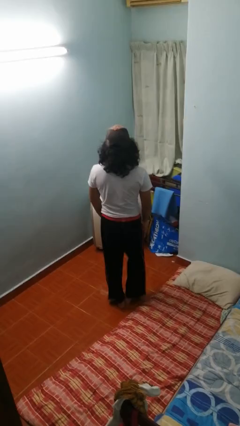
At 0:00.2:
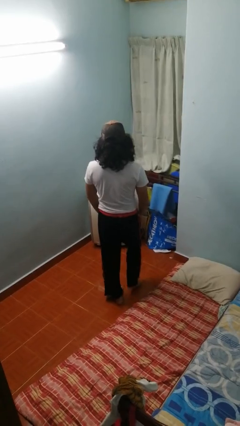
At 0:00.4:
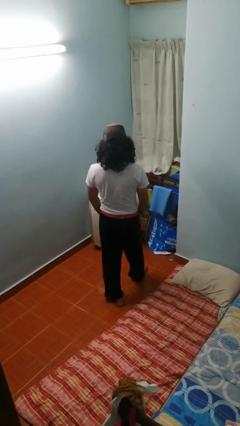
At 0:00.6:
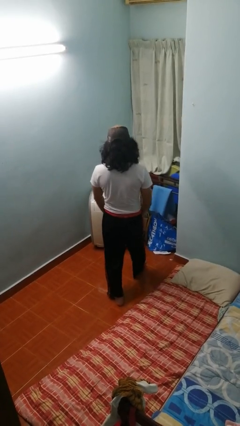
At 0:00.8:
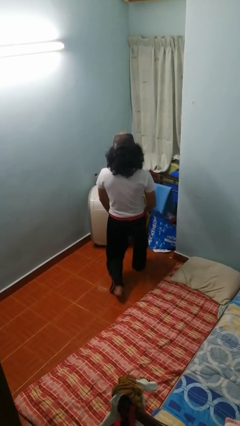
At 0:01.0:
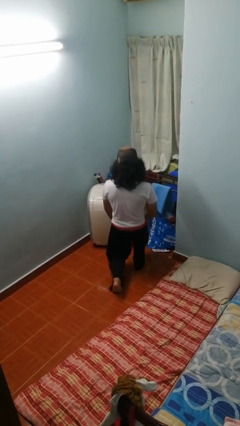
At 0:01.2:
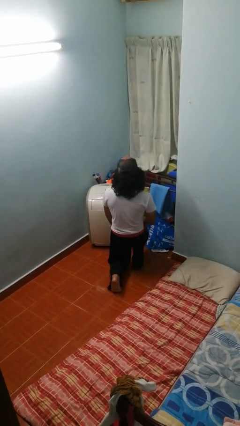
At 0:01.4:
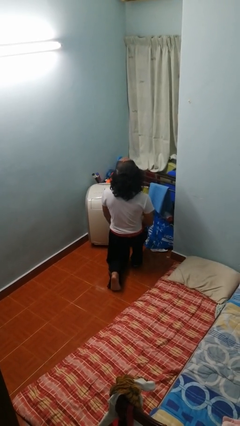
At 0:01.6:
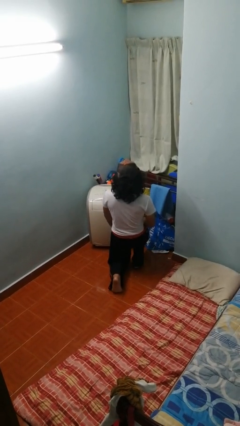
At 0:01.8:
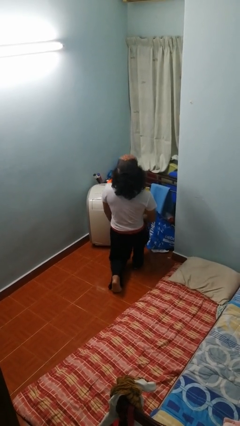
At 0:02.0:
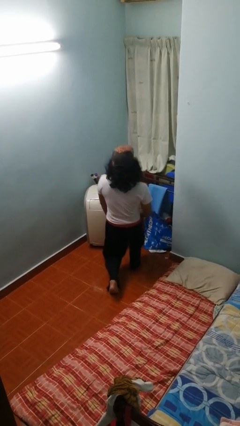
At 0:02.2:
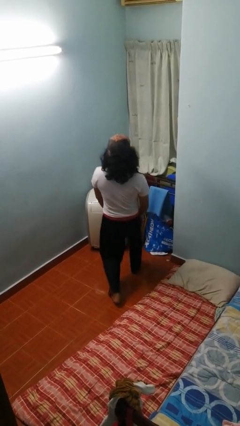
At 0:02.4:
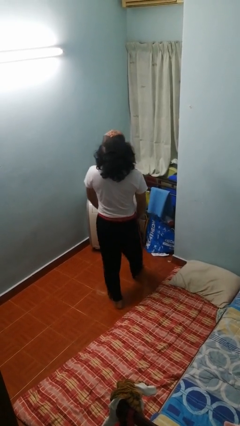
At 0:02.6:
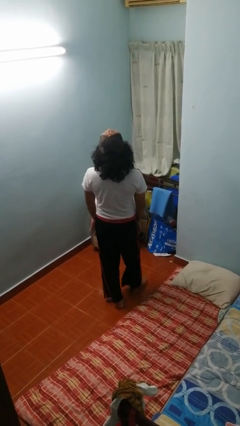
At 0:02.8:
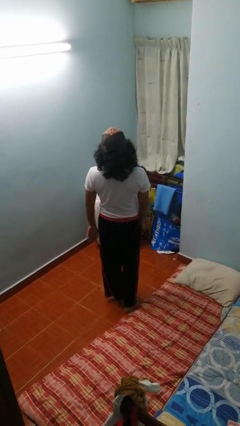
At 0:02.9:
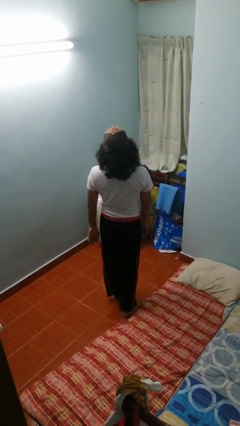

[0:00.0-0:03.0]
person exercises with lunges

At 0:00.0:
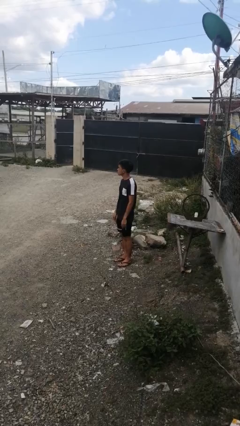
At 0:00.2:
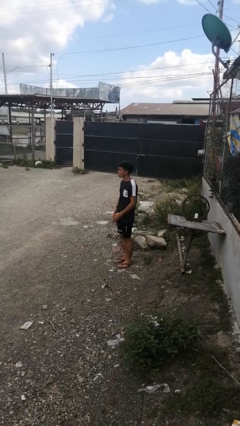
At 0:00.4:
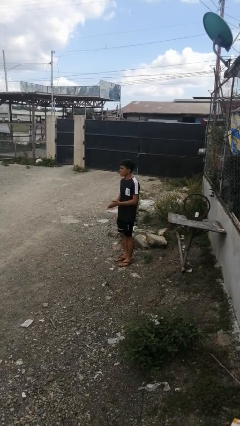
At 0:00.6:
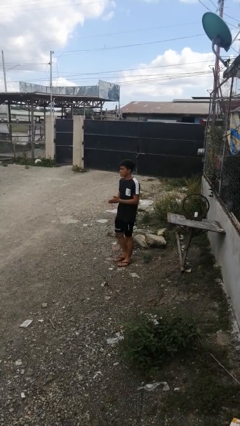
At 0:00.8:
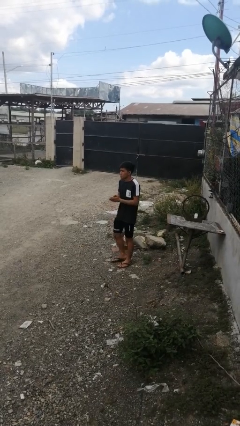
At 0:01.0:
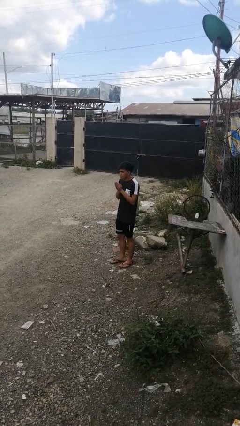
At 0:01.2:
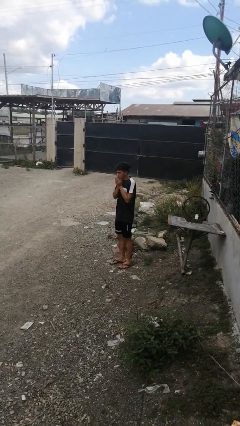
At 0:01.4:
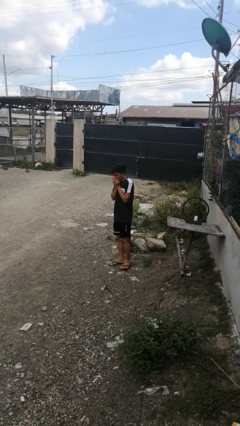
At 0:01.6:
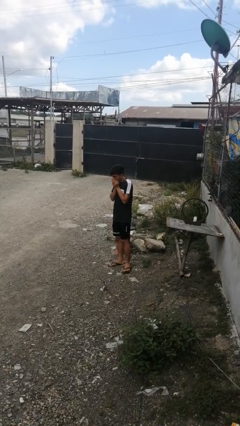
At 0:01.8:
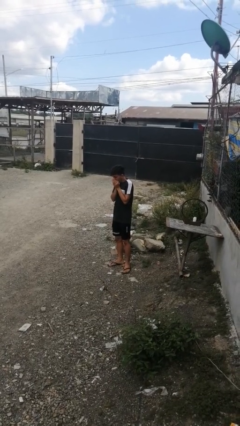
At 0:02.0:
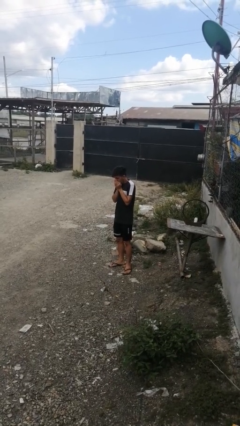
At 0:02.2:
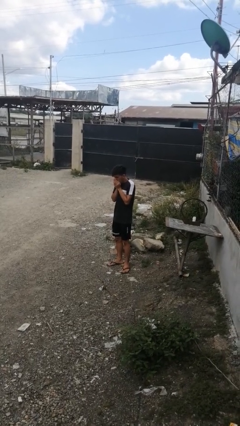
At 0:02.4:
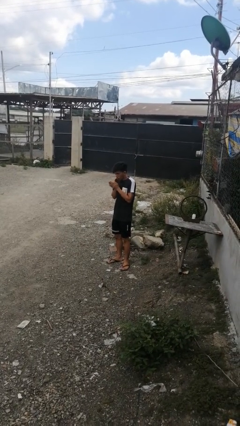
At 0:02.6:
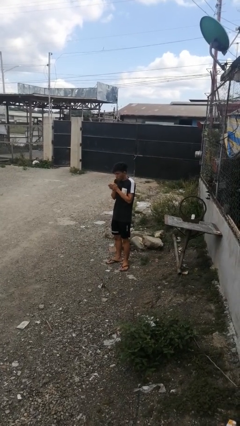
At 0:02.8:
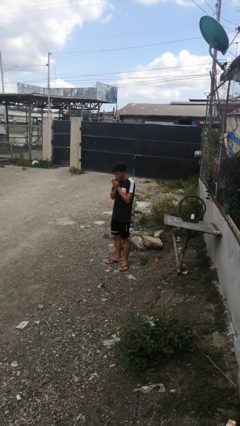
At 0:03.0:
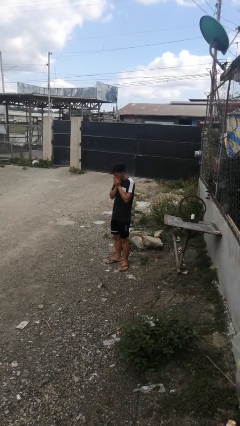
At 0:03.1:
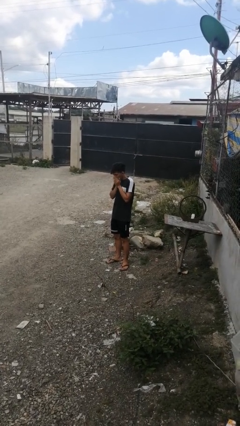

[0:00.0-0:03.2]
person blows into hands

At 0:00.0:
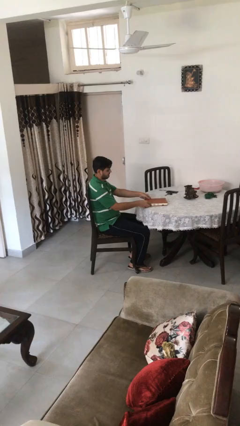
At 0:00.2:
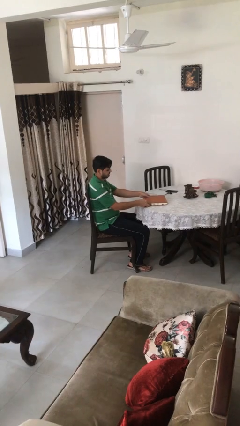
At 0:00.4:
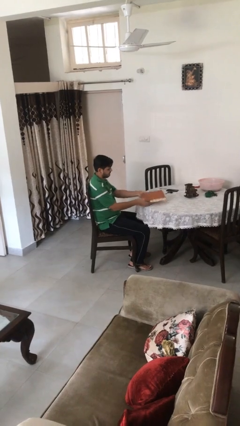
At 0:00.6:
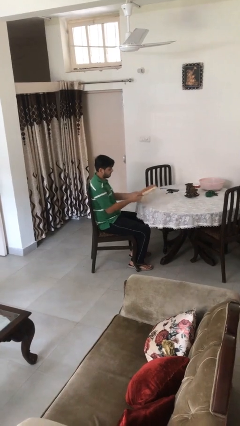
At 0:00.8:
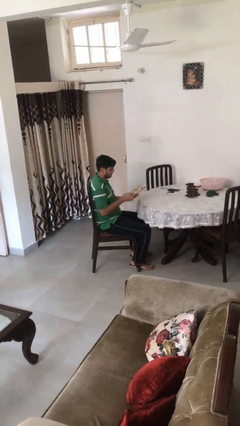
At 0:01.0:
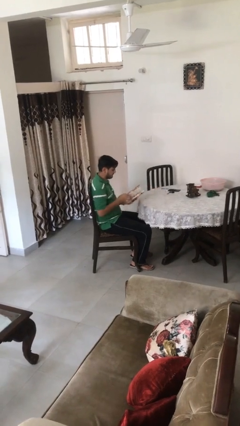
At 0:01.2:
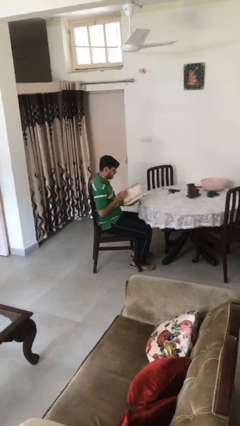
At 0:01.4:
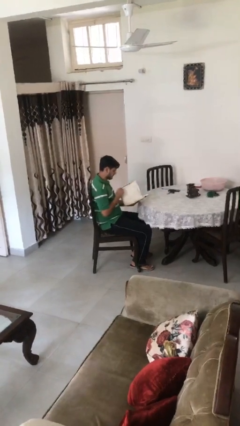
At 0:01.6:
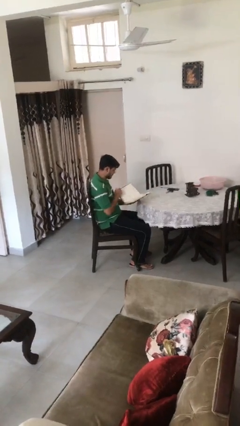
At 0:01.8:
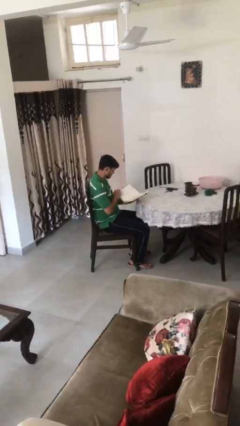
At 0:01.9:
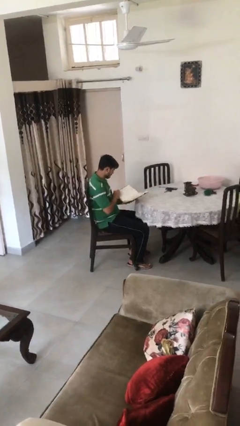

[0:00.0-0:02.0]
person picks up object from table

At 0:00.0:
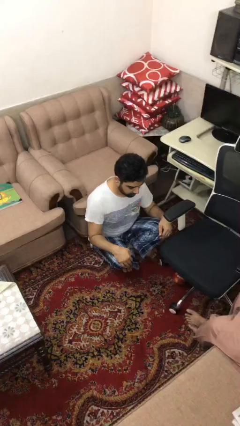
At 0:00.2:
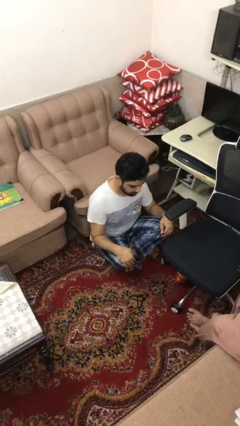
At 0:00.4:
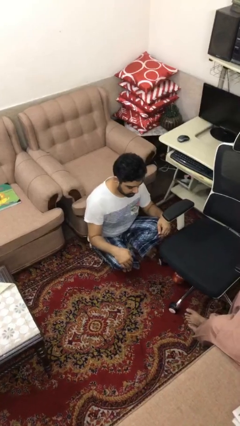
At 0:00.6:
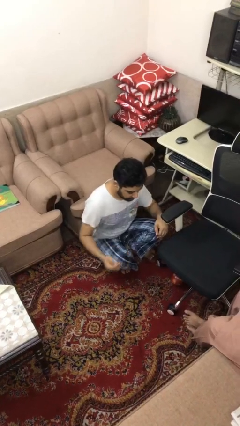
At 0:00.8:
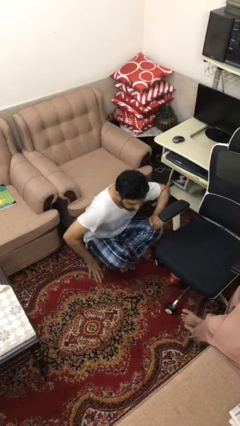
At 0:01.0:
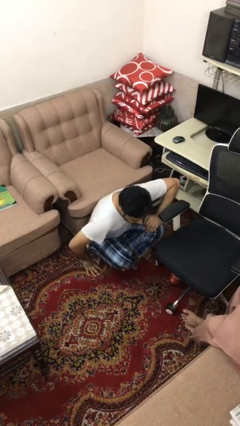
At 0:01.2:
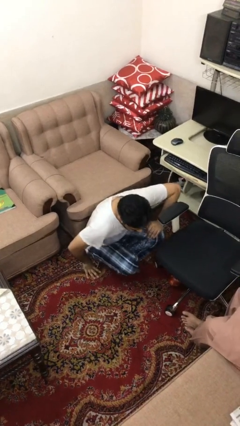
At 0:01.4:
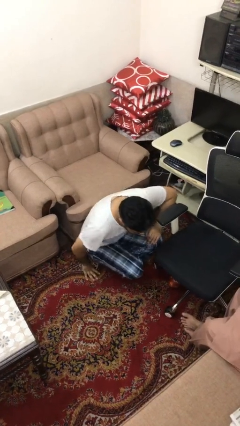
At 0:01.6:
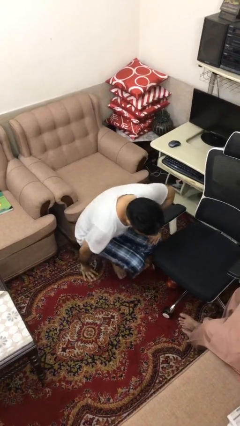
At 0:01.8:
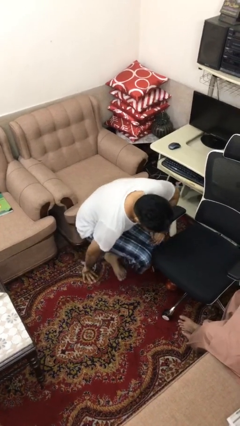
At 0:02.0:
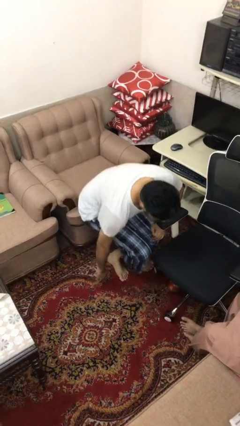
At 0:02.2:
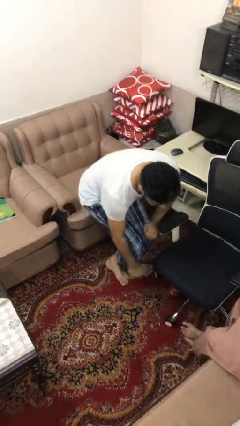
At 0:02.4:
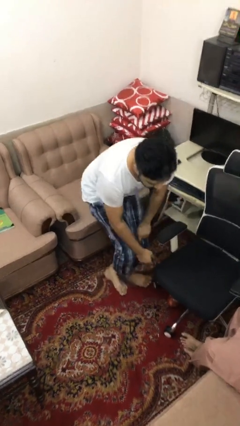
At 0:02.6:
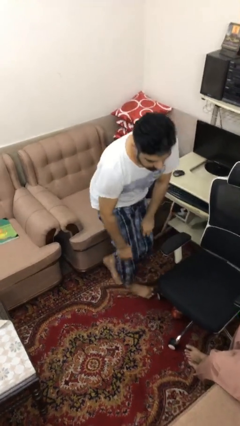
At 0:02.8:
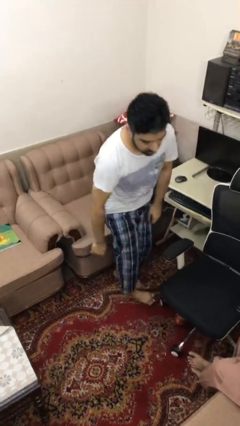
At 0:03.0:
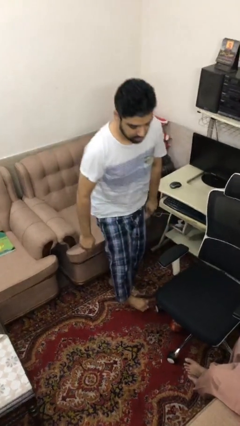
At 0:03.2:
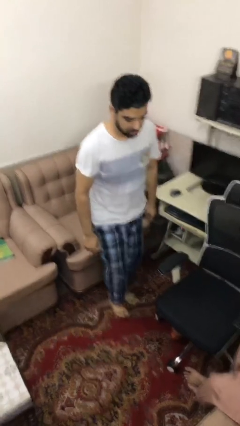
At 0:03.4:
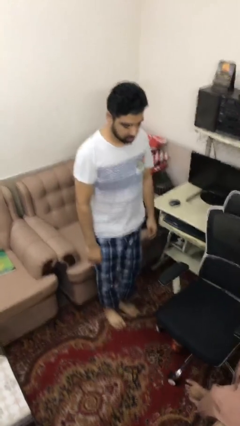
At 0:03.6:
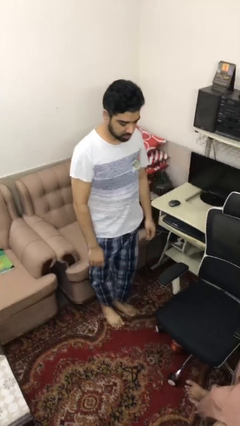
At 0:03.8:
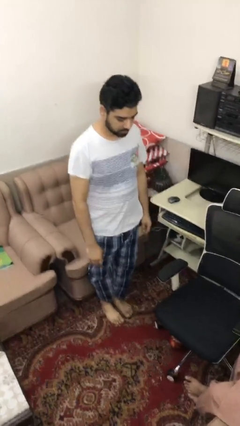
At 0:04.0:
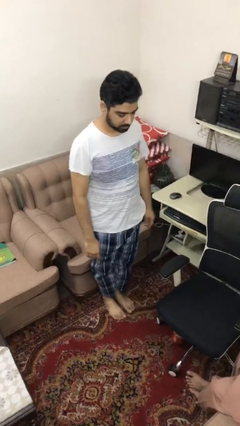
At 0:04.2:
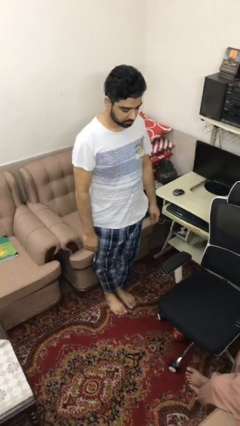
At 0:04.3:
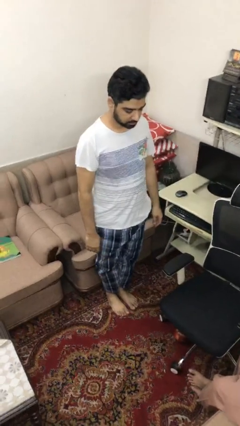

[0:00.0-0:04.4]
person stands up from floor

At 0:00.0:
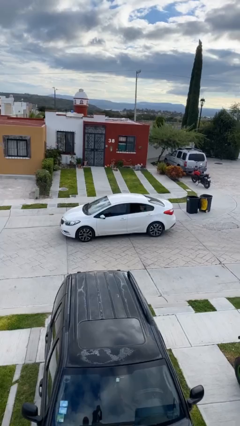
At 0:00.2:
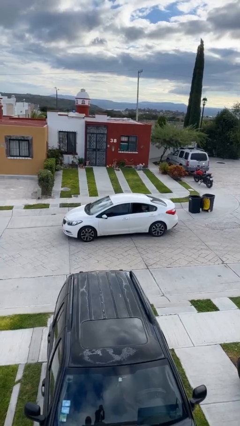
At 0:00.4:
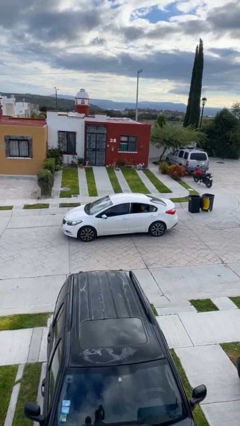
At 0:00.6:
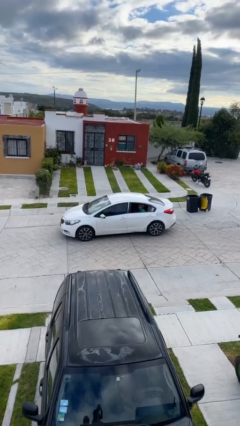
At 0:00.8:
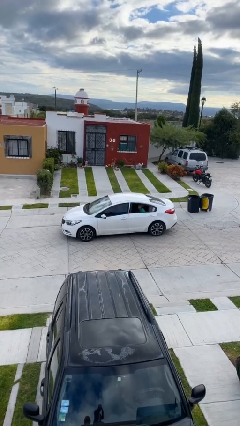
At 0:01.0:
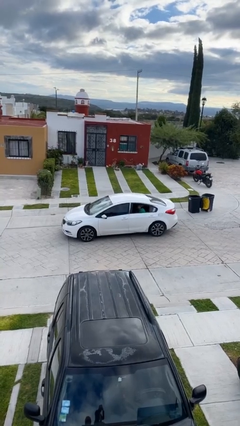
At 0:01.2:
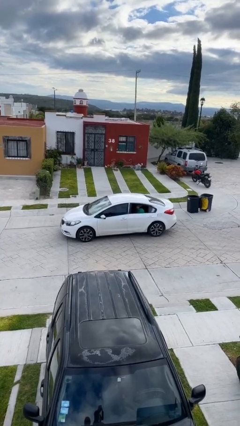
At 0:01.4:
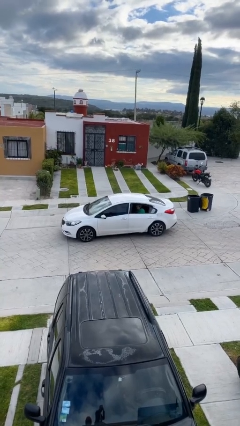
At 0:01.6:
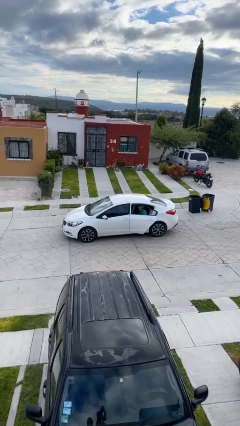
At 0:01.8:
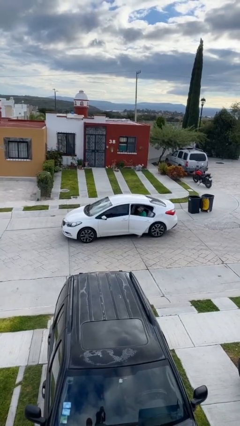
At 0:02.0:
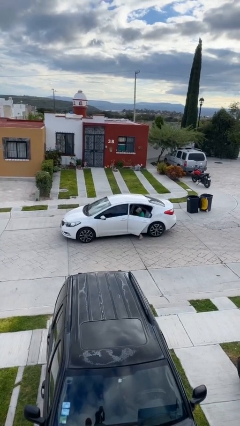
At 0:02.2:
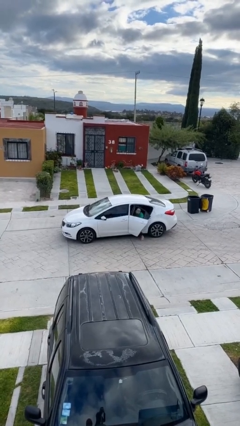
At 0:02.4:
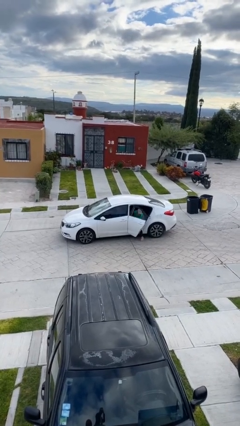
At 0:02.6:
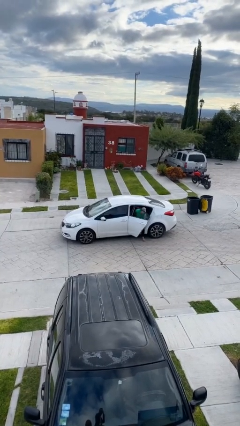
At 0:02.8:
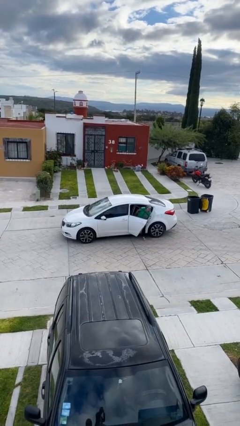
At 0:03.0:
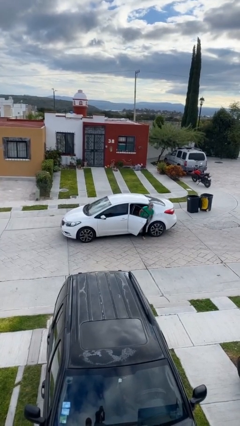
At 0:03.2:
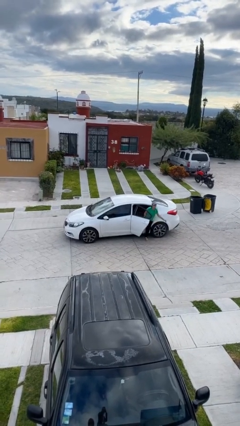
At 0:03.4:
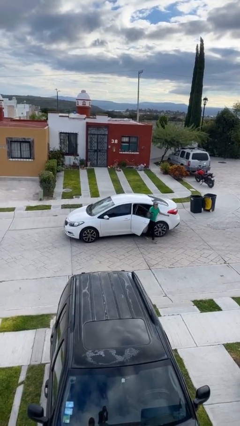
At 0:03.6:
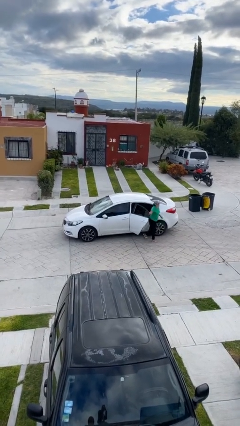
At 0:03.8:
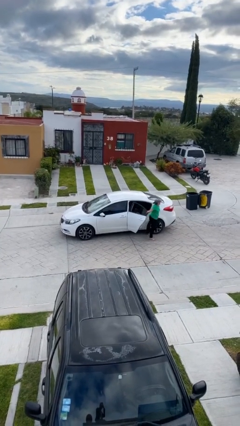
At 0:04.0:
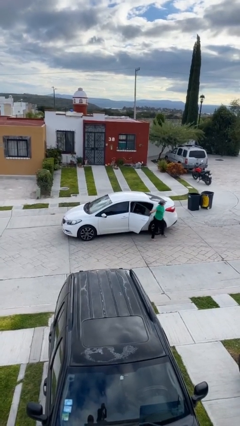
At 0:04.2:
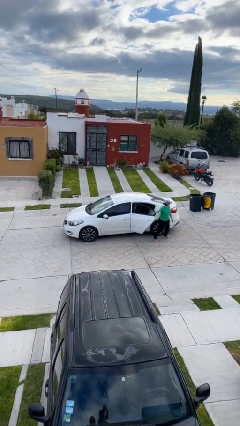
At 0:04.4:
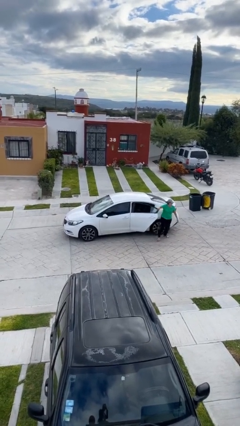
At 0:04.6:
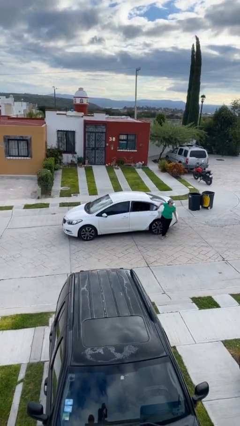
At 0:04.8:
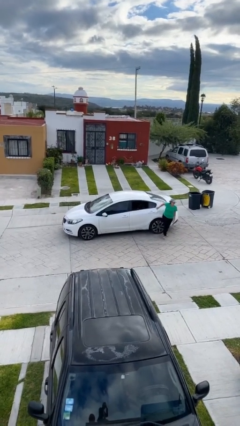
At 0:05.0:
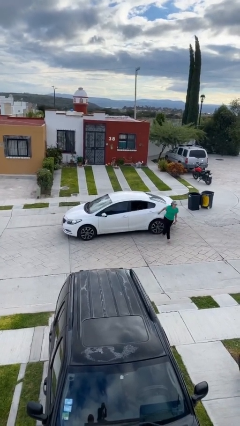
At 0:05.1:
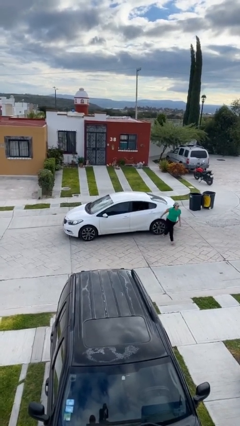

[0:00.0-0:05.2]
car drops off person
